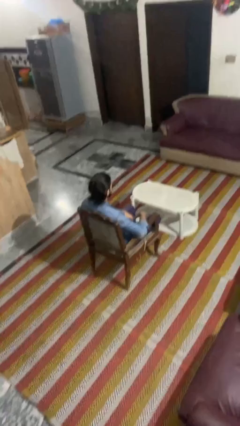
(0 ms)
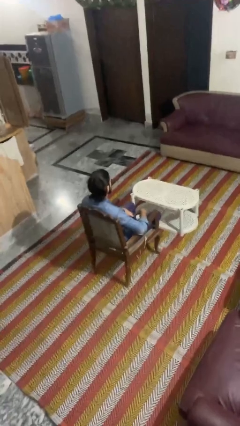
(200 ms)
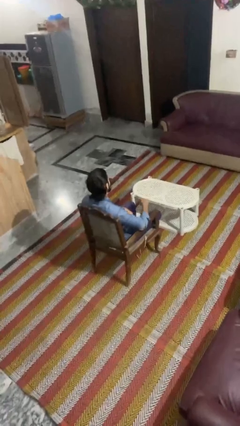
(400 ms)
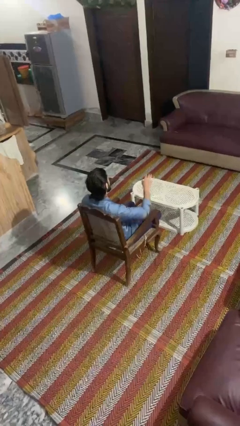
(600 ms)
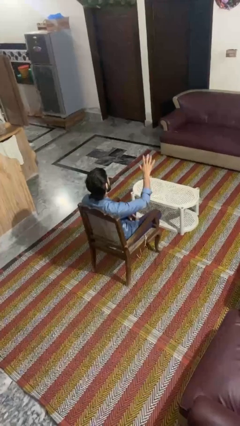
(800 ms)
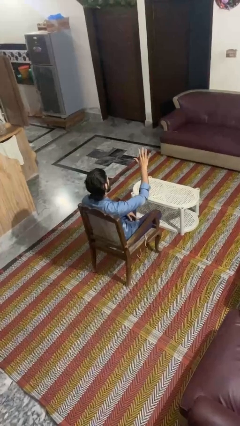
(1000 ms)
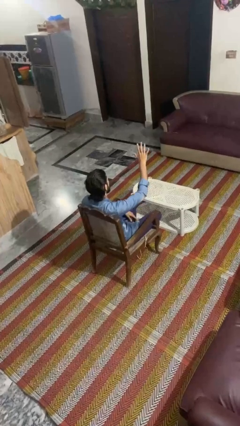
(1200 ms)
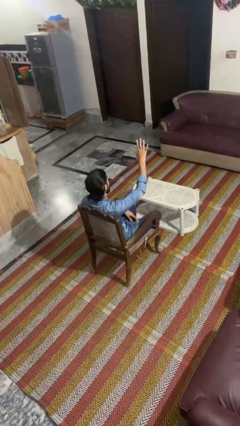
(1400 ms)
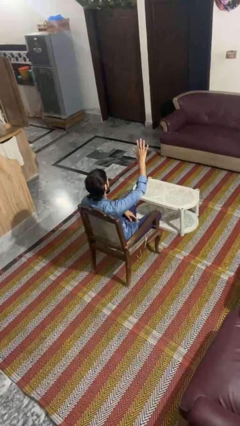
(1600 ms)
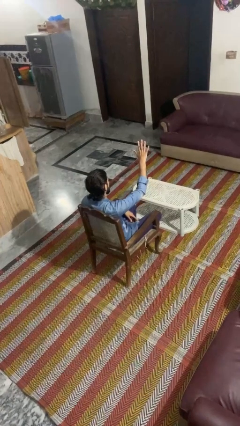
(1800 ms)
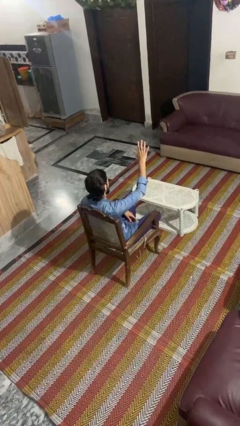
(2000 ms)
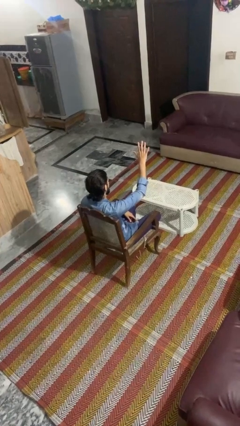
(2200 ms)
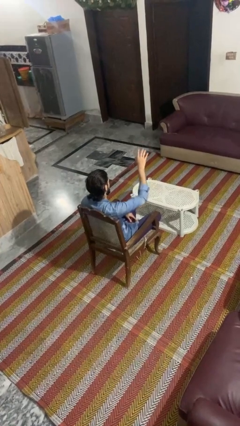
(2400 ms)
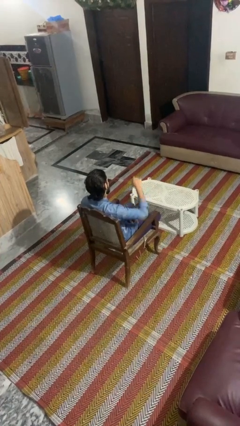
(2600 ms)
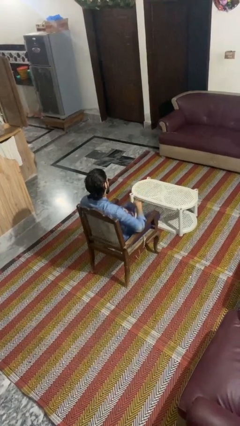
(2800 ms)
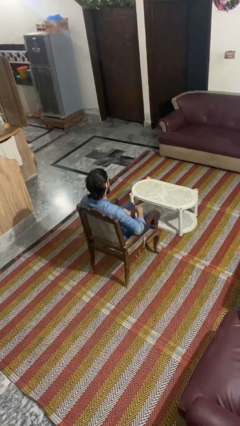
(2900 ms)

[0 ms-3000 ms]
person gestures number five

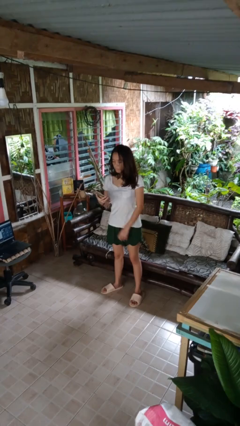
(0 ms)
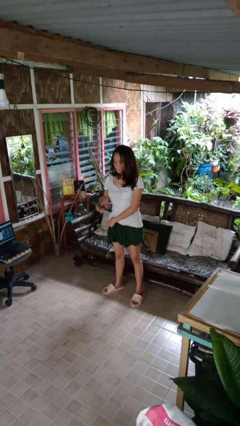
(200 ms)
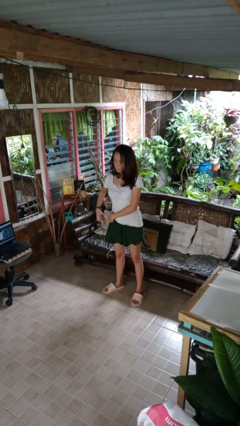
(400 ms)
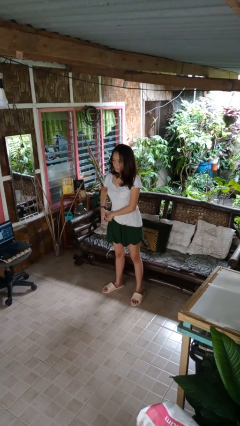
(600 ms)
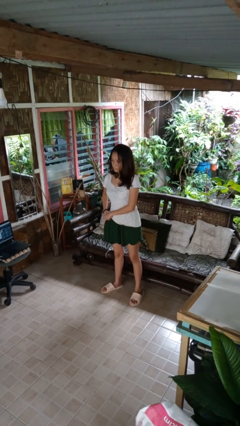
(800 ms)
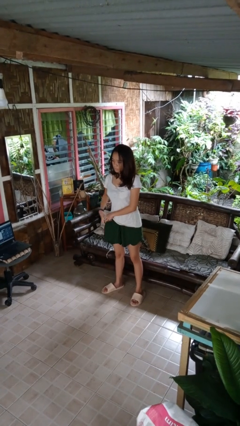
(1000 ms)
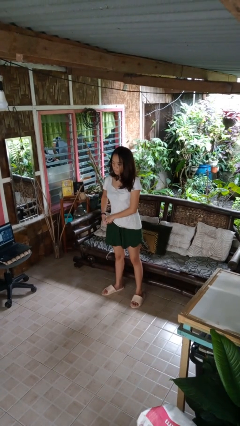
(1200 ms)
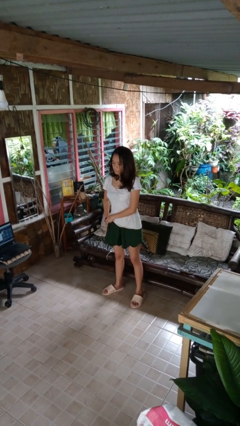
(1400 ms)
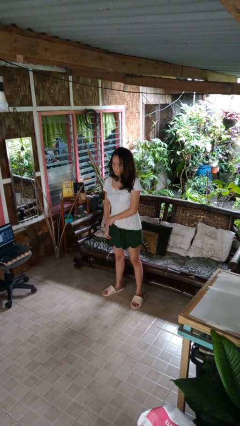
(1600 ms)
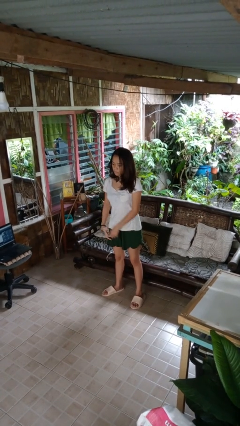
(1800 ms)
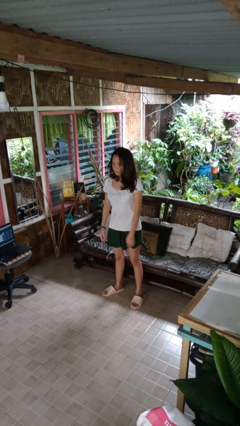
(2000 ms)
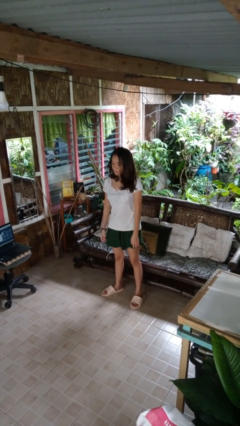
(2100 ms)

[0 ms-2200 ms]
person puts phone into pocket

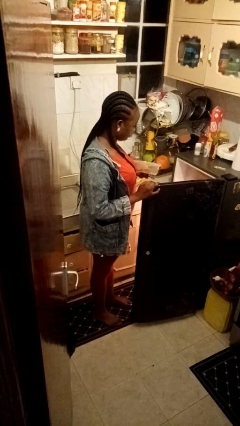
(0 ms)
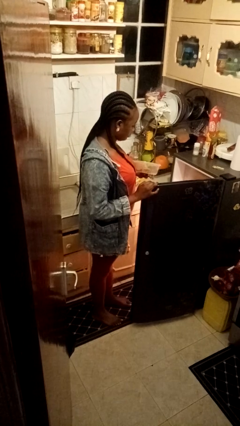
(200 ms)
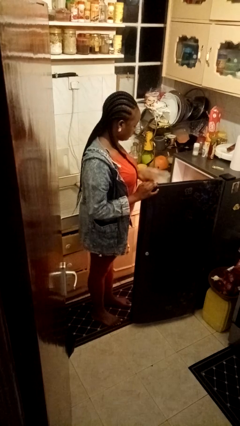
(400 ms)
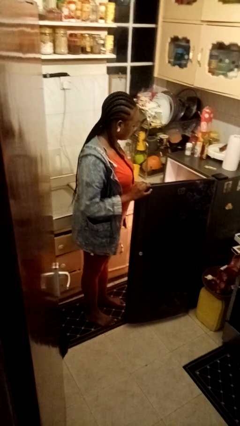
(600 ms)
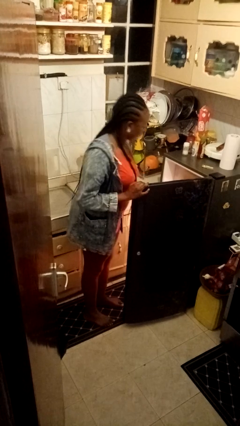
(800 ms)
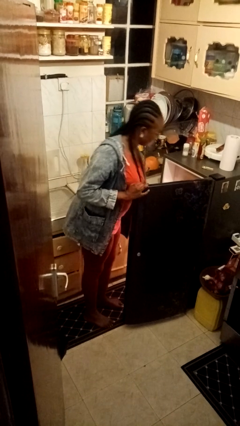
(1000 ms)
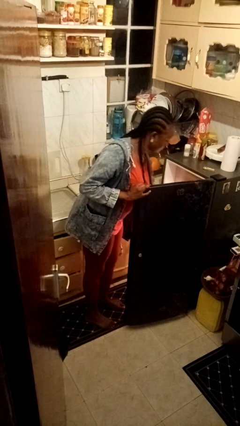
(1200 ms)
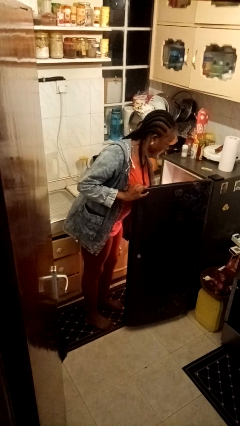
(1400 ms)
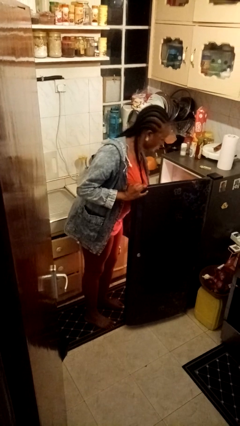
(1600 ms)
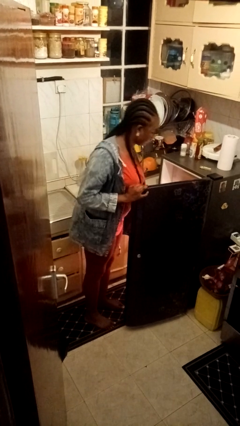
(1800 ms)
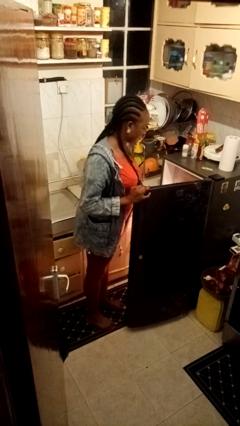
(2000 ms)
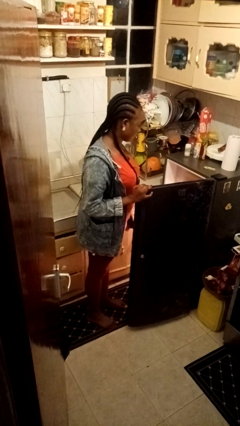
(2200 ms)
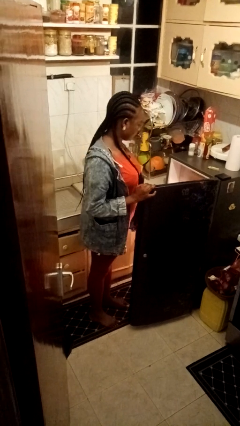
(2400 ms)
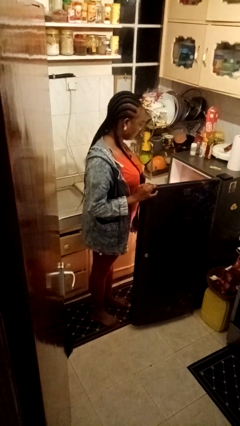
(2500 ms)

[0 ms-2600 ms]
person puts object into refrigerator

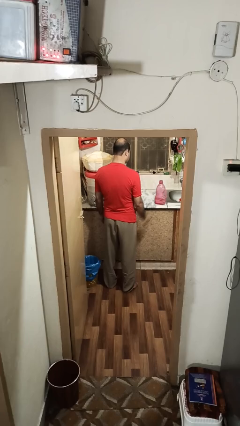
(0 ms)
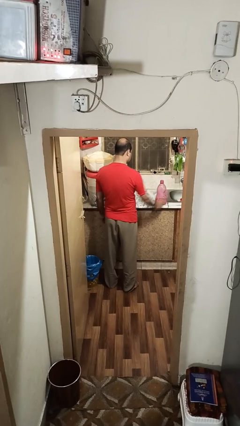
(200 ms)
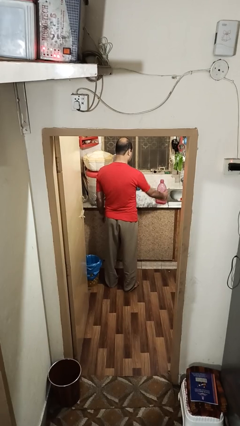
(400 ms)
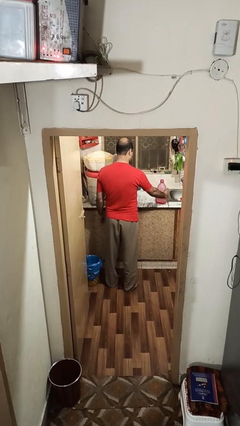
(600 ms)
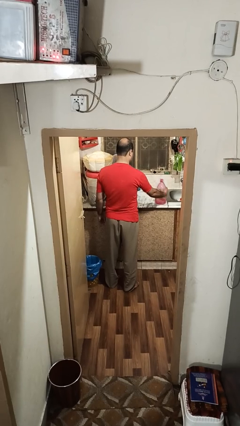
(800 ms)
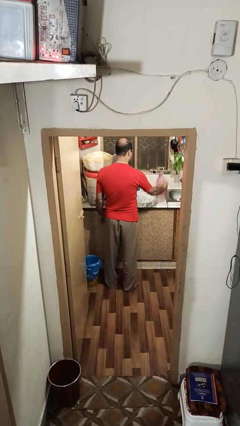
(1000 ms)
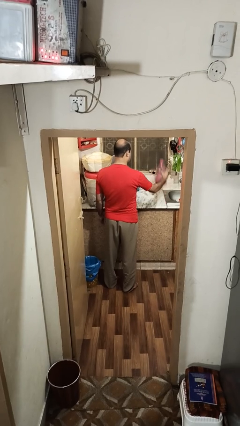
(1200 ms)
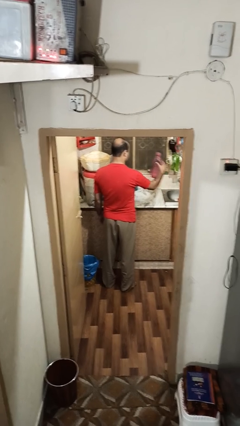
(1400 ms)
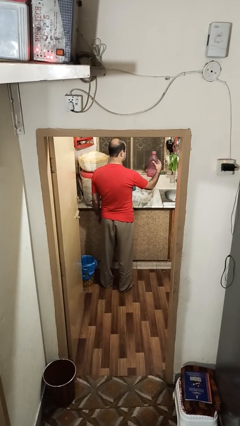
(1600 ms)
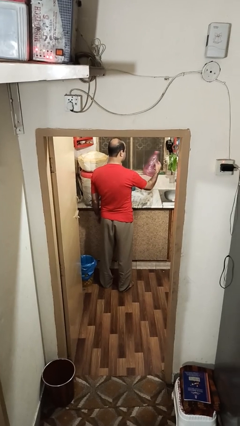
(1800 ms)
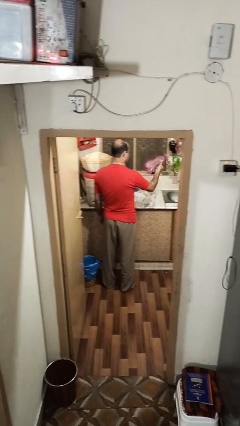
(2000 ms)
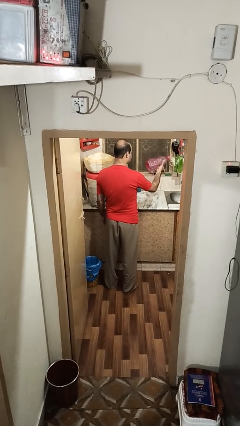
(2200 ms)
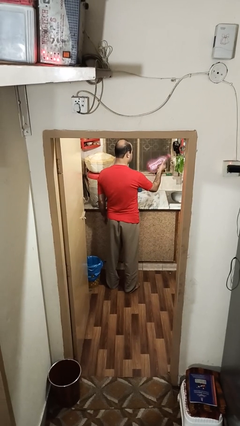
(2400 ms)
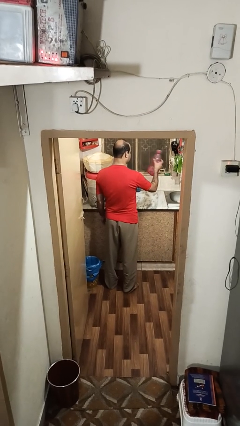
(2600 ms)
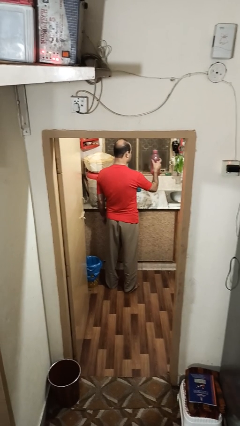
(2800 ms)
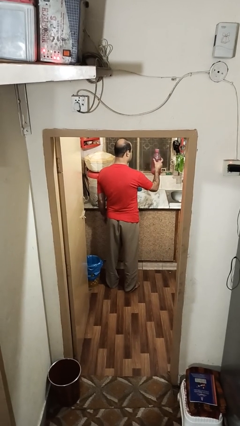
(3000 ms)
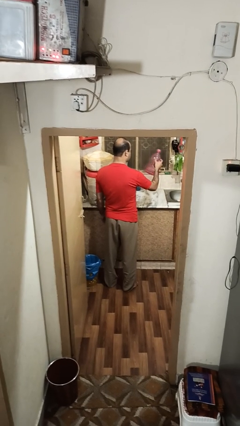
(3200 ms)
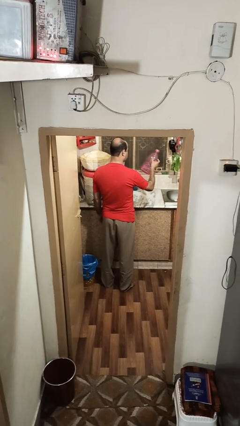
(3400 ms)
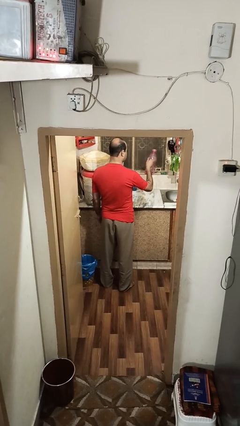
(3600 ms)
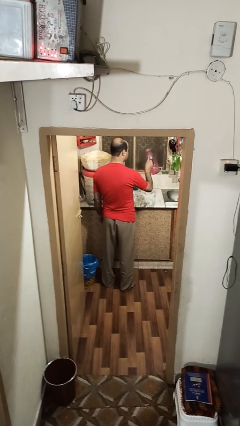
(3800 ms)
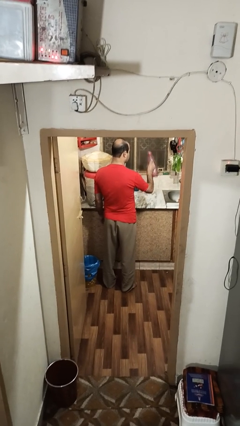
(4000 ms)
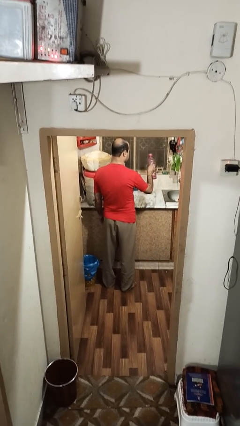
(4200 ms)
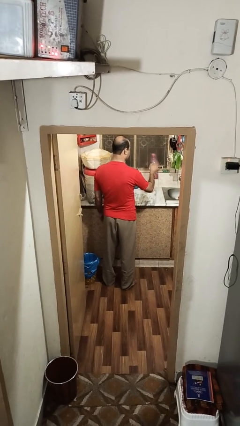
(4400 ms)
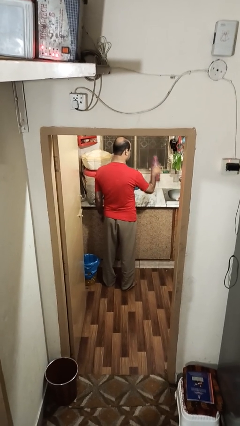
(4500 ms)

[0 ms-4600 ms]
person picks up object from countertop

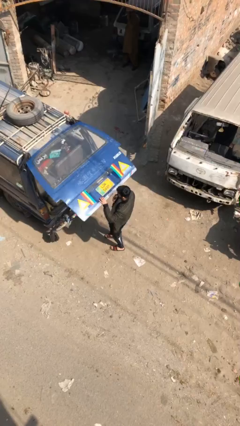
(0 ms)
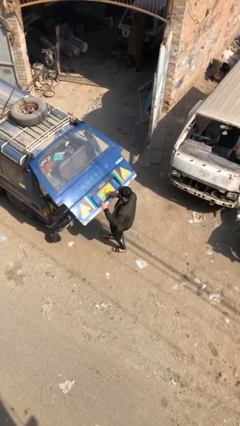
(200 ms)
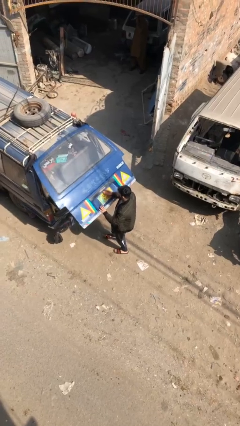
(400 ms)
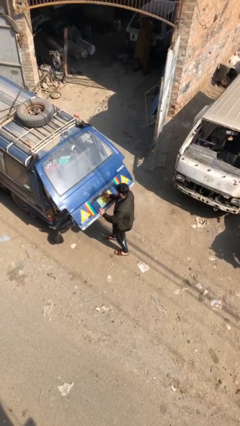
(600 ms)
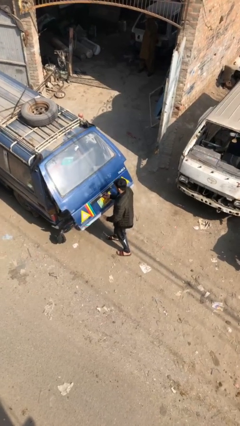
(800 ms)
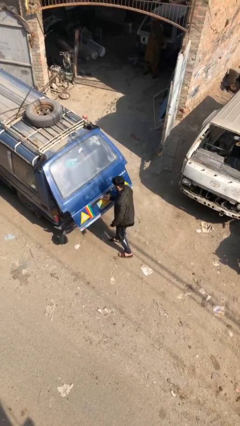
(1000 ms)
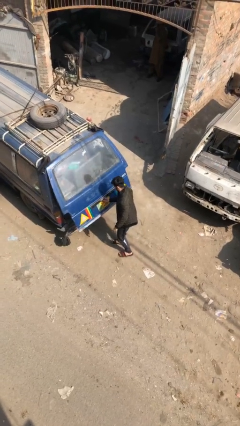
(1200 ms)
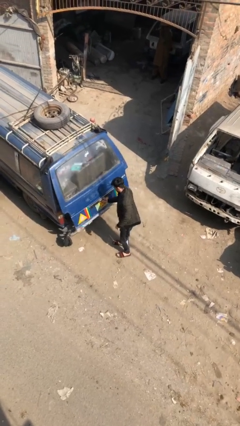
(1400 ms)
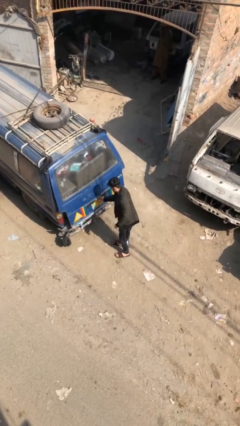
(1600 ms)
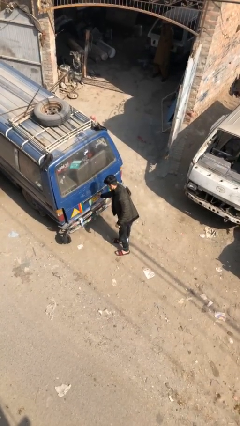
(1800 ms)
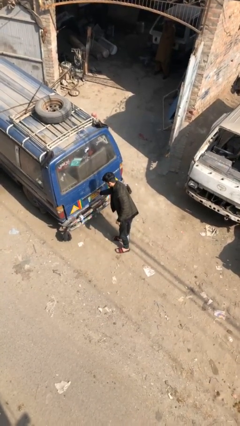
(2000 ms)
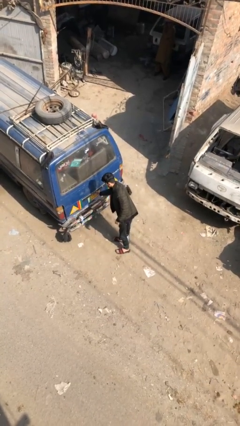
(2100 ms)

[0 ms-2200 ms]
person closes car trunk

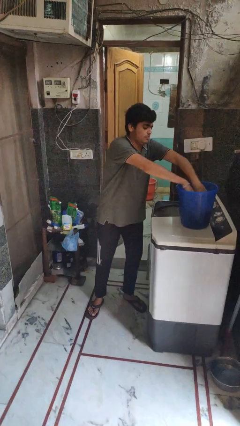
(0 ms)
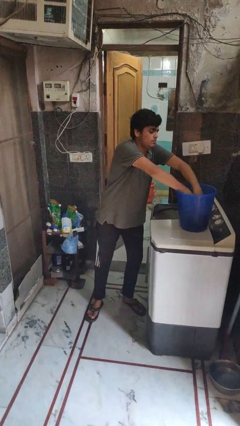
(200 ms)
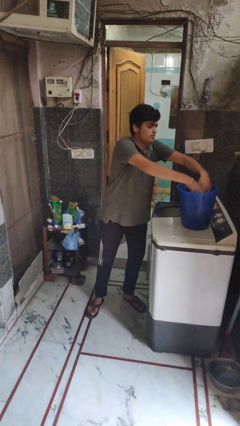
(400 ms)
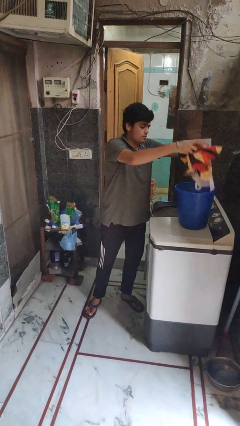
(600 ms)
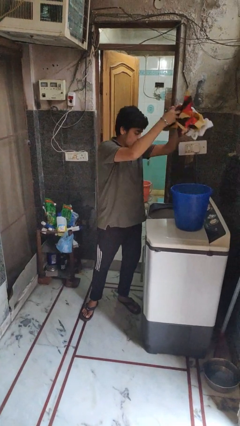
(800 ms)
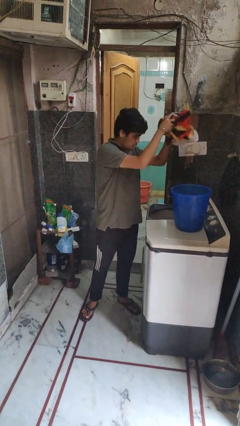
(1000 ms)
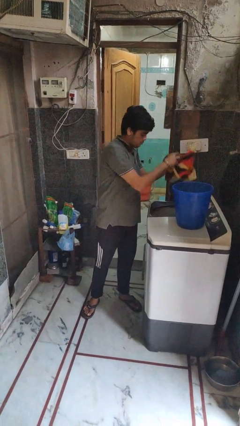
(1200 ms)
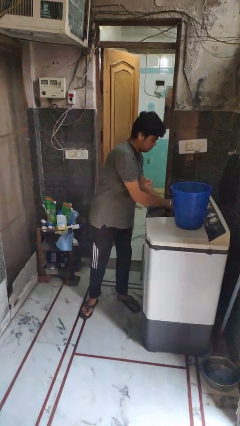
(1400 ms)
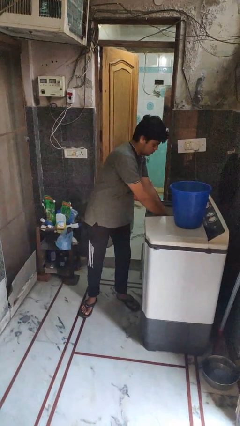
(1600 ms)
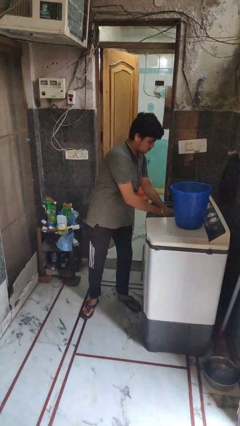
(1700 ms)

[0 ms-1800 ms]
person loads clotheswasher

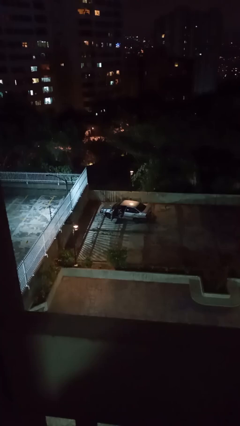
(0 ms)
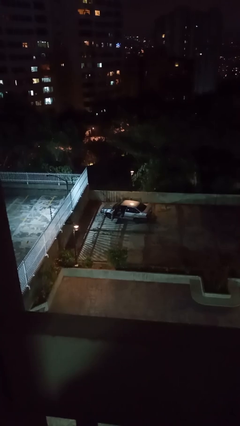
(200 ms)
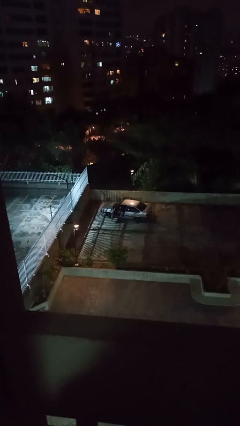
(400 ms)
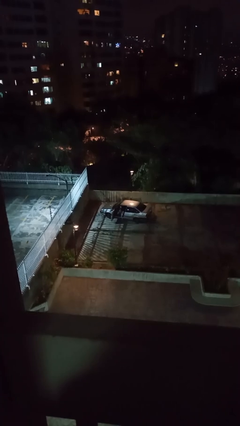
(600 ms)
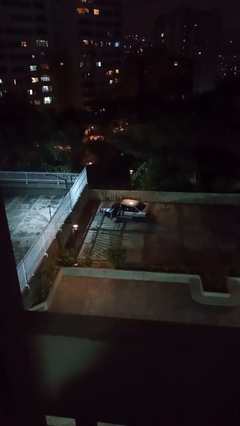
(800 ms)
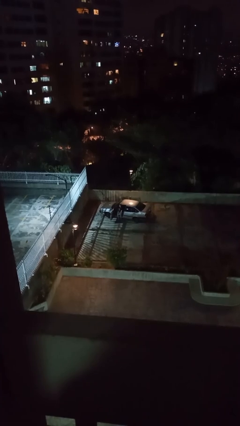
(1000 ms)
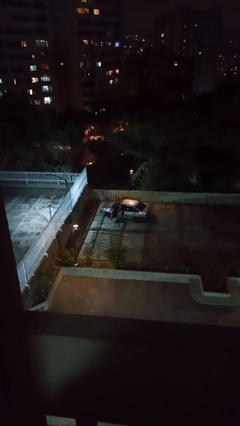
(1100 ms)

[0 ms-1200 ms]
person exits car
